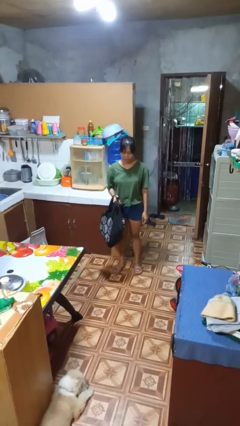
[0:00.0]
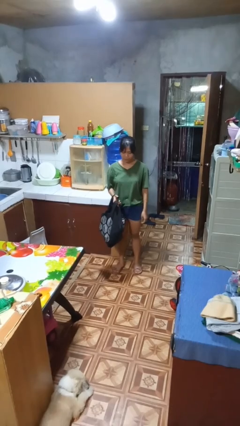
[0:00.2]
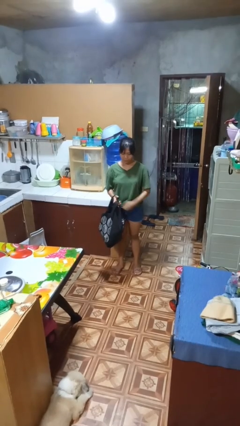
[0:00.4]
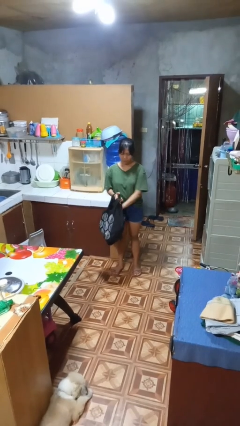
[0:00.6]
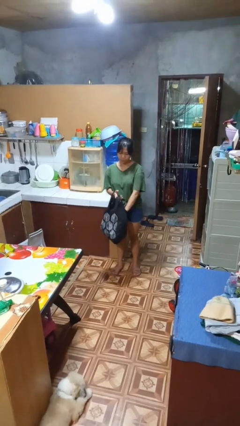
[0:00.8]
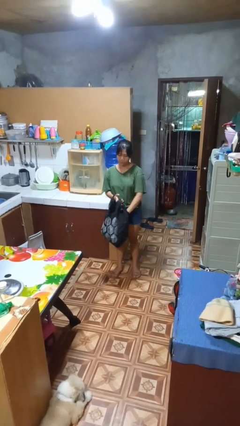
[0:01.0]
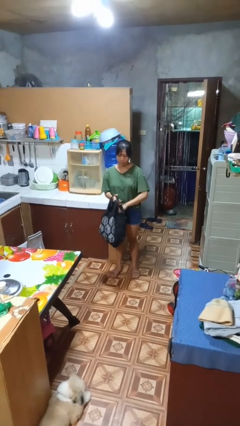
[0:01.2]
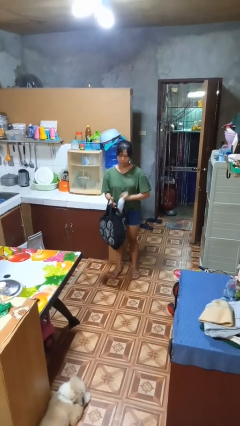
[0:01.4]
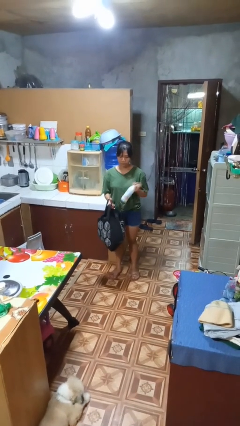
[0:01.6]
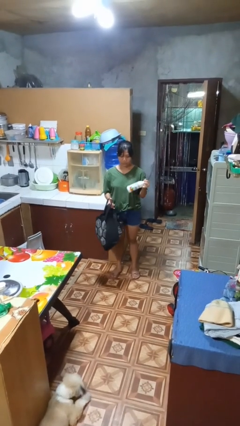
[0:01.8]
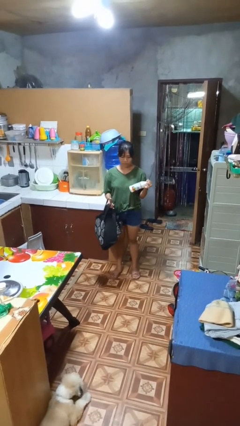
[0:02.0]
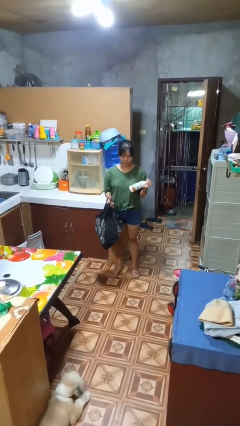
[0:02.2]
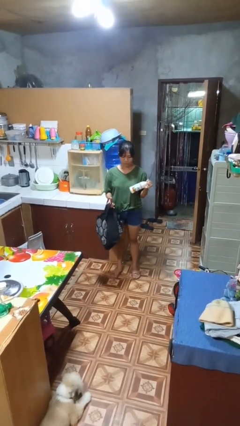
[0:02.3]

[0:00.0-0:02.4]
person takes object from bag

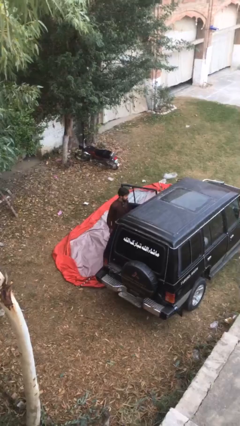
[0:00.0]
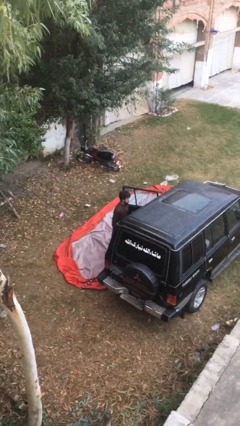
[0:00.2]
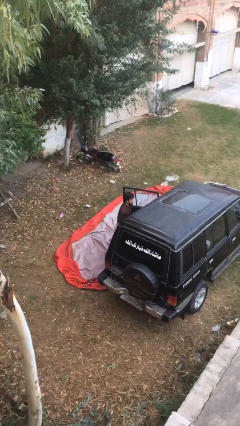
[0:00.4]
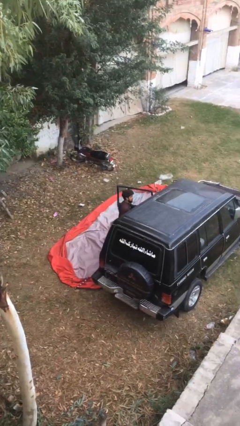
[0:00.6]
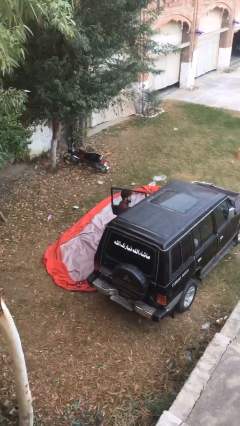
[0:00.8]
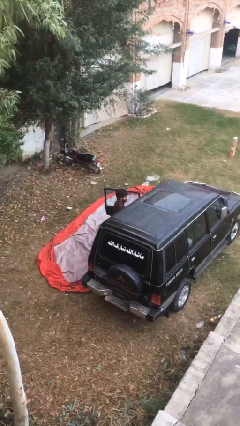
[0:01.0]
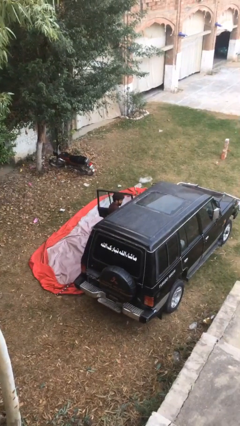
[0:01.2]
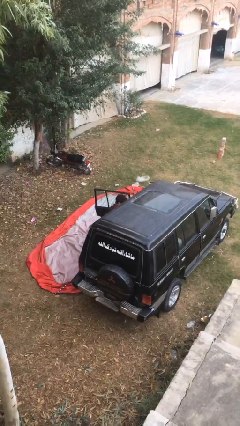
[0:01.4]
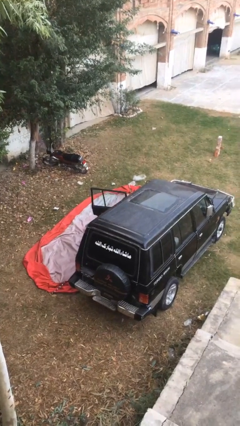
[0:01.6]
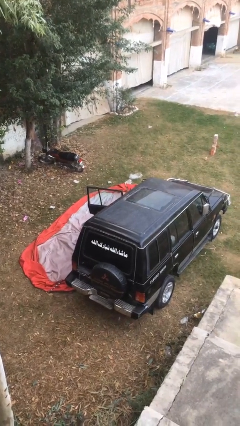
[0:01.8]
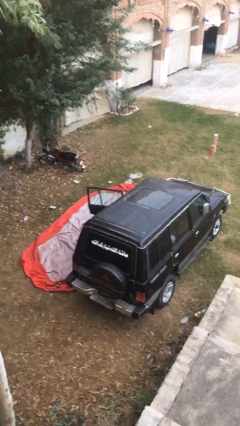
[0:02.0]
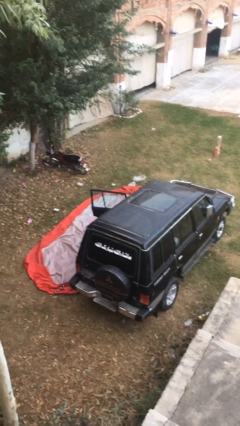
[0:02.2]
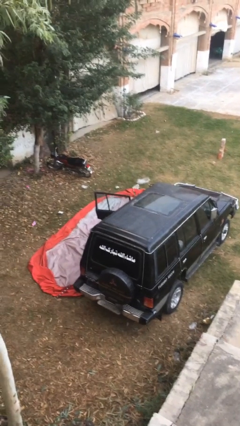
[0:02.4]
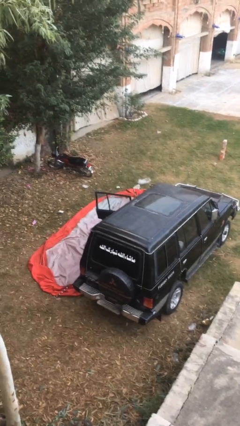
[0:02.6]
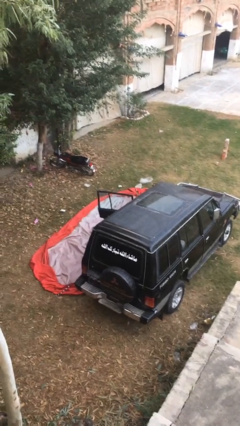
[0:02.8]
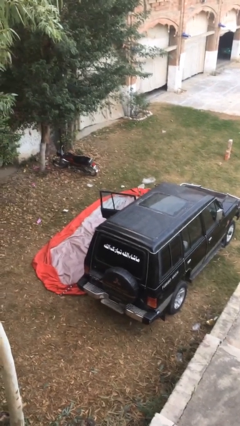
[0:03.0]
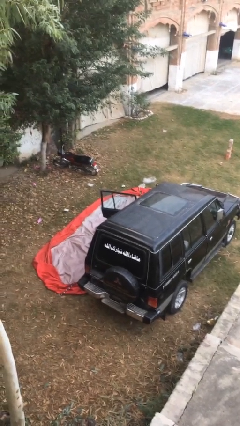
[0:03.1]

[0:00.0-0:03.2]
person enters car

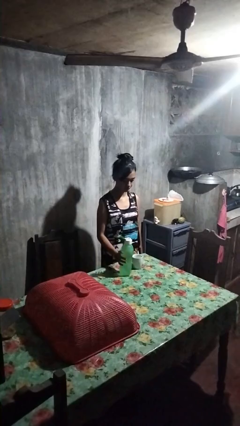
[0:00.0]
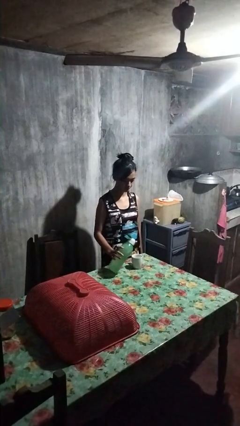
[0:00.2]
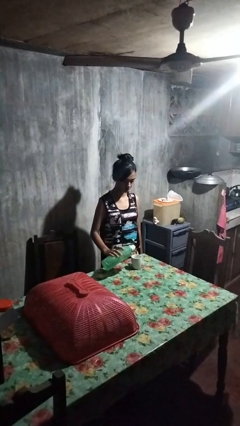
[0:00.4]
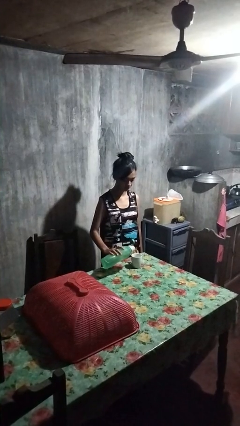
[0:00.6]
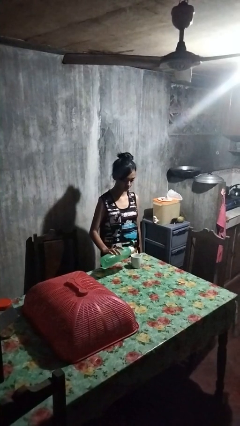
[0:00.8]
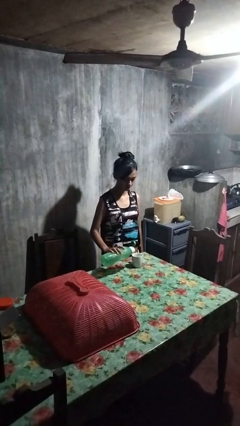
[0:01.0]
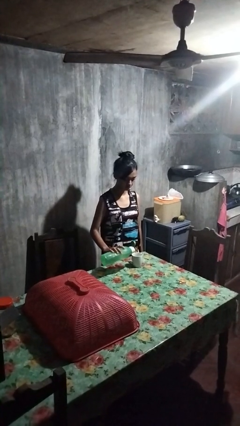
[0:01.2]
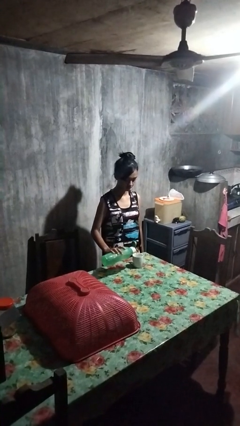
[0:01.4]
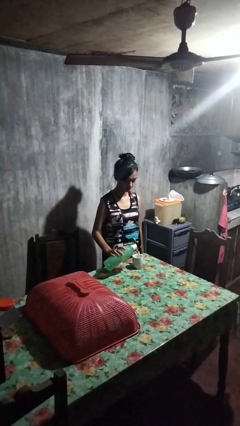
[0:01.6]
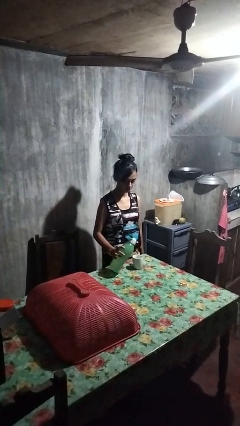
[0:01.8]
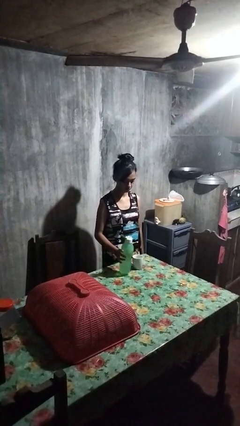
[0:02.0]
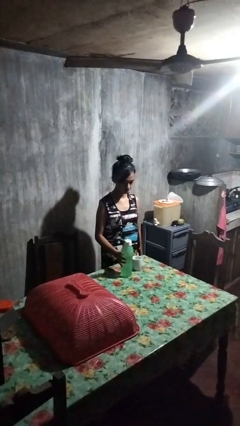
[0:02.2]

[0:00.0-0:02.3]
person pours liquid into cup

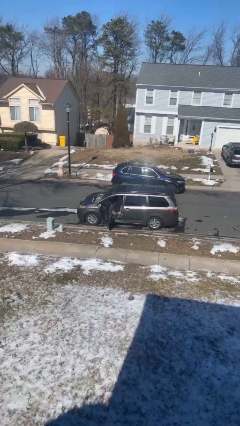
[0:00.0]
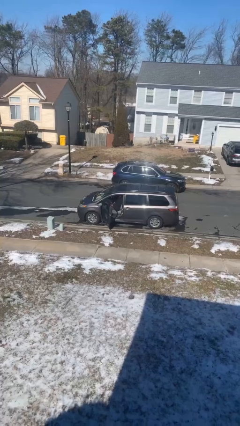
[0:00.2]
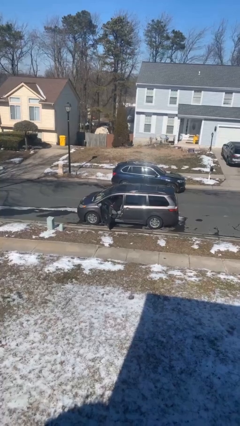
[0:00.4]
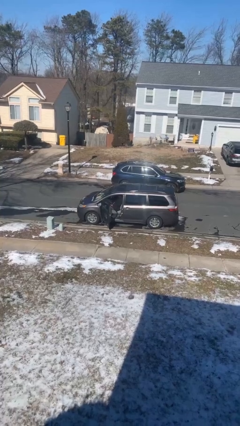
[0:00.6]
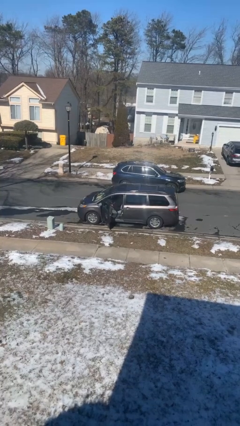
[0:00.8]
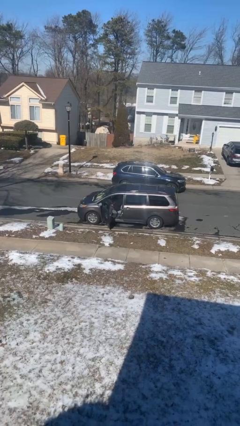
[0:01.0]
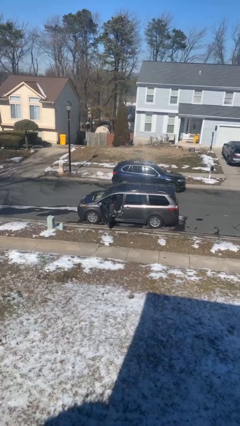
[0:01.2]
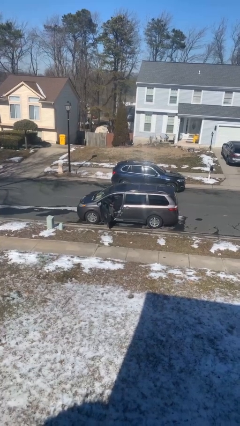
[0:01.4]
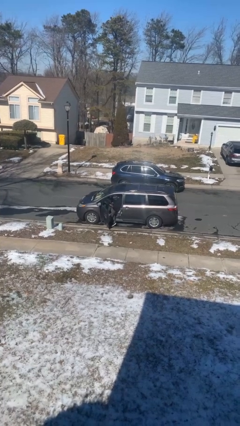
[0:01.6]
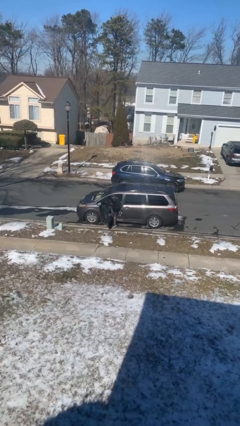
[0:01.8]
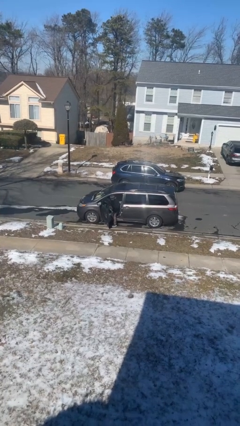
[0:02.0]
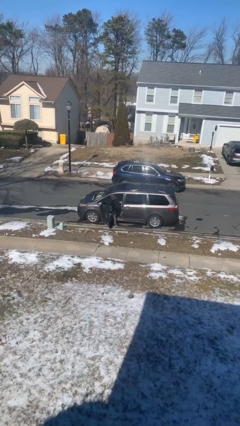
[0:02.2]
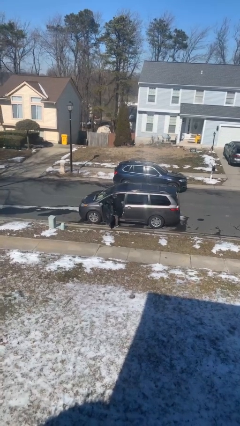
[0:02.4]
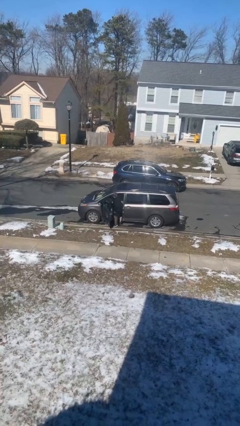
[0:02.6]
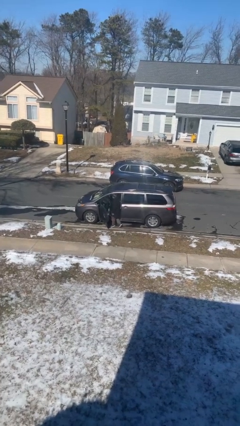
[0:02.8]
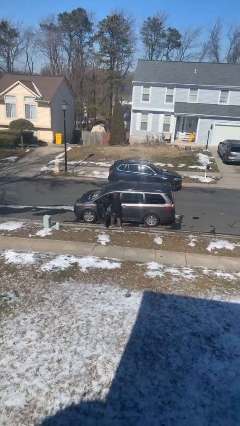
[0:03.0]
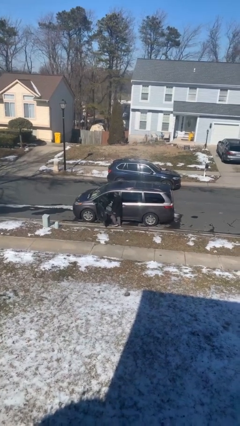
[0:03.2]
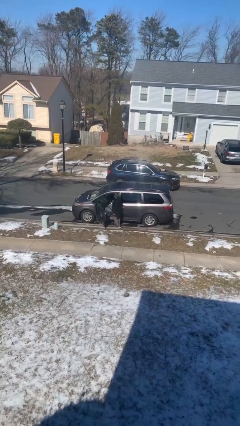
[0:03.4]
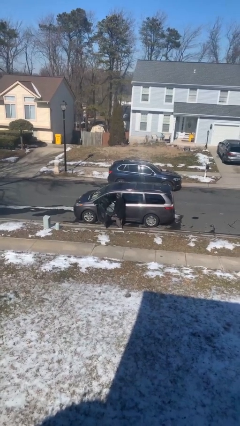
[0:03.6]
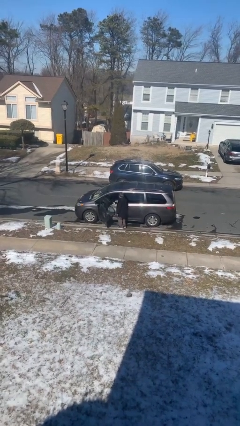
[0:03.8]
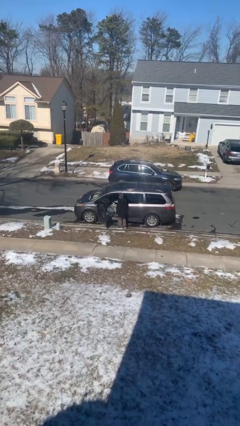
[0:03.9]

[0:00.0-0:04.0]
person exits car

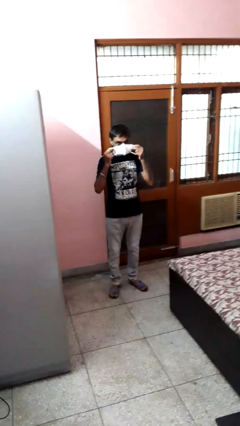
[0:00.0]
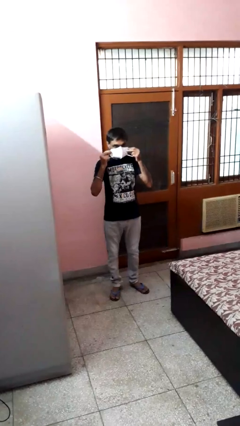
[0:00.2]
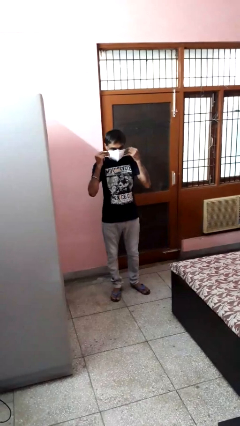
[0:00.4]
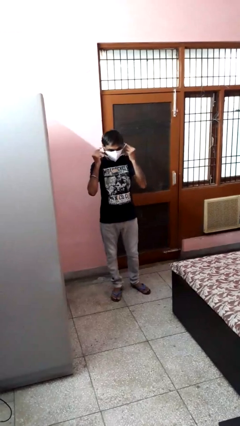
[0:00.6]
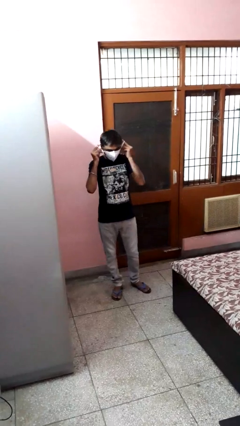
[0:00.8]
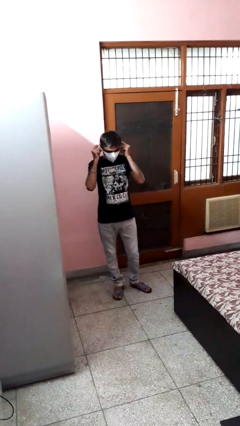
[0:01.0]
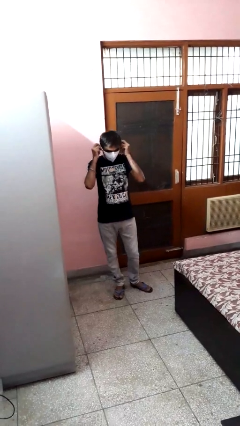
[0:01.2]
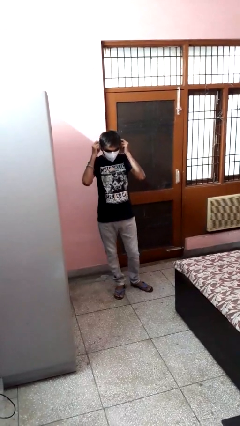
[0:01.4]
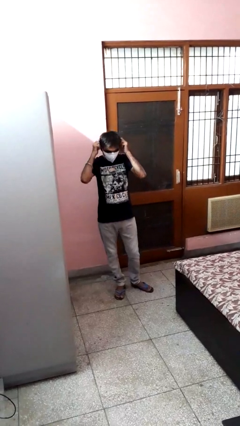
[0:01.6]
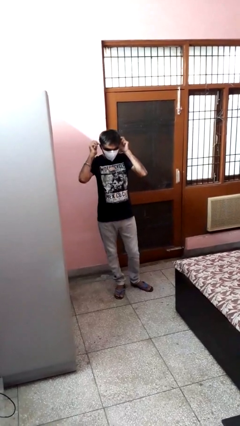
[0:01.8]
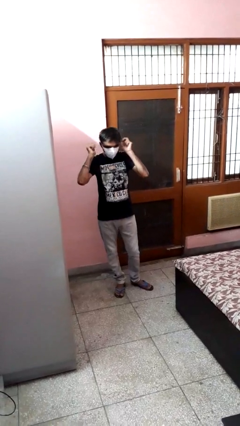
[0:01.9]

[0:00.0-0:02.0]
person puts on facemask

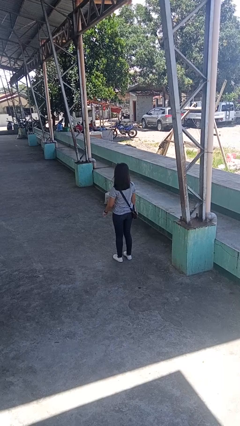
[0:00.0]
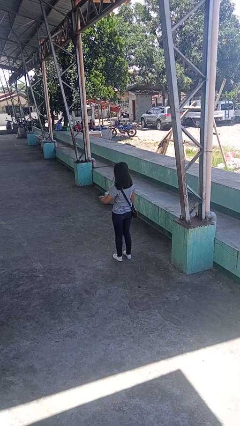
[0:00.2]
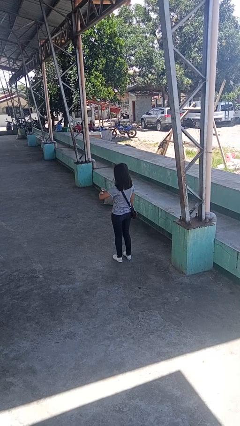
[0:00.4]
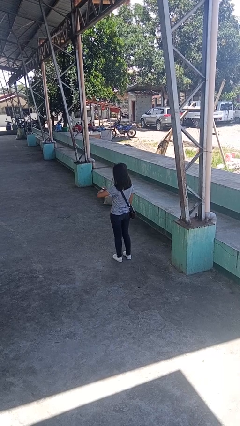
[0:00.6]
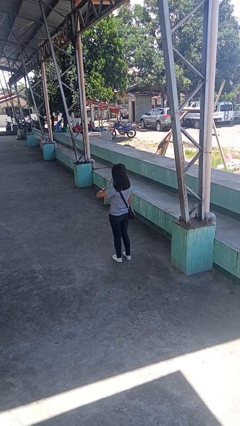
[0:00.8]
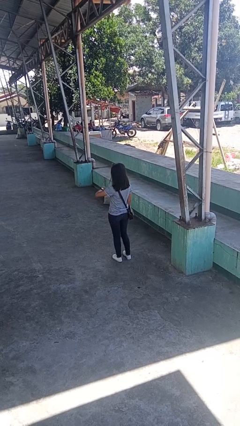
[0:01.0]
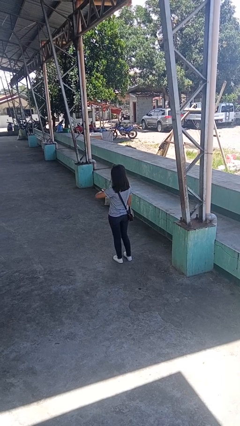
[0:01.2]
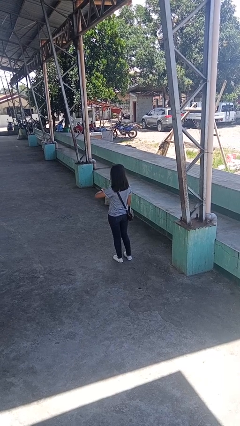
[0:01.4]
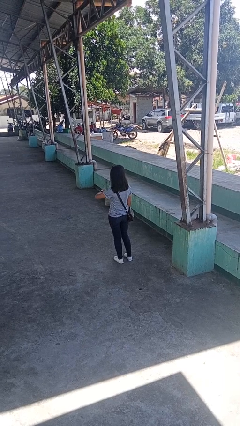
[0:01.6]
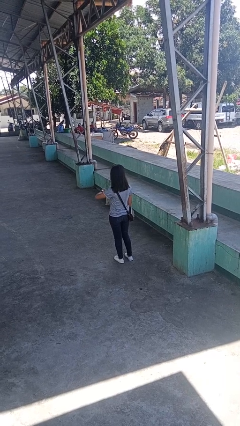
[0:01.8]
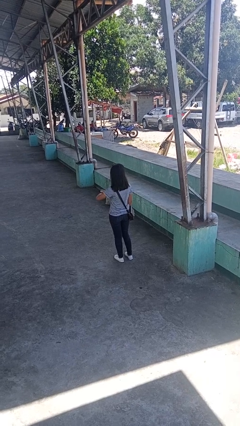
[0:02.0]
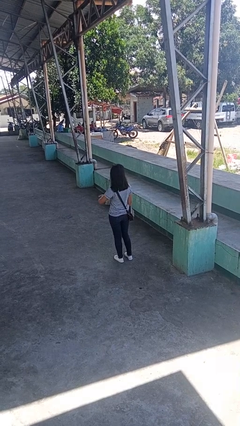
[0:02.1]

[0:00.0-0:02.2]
person looks at wristwatch

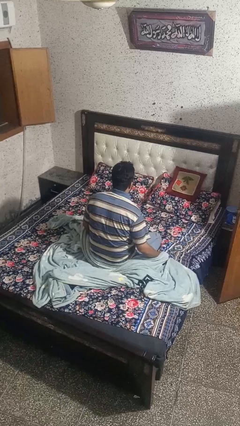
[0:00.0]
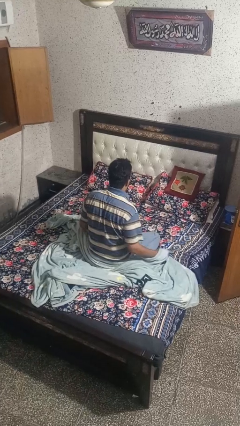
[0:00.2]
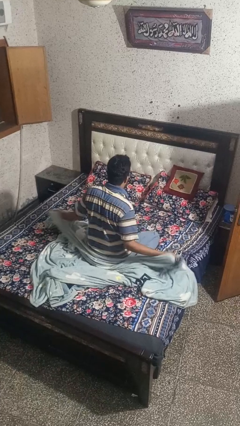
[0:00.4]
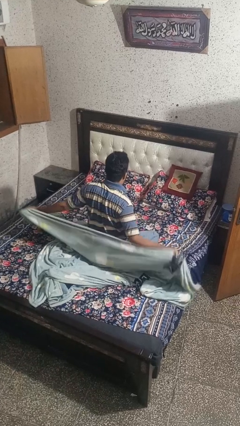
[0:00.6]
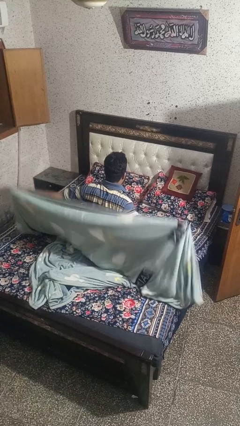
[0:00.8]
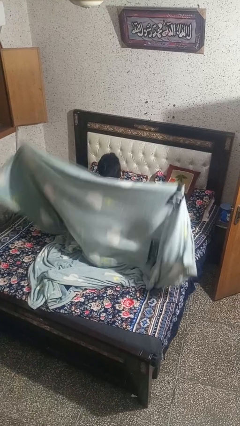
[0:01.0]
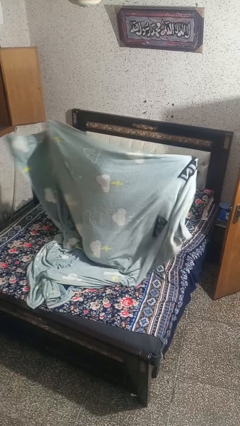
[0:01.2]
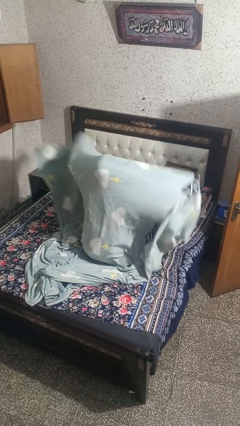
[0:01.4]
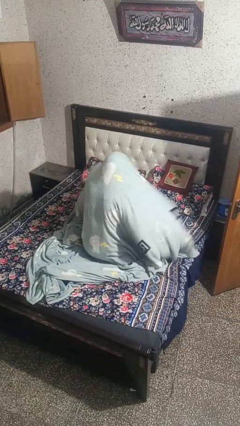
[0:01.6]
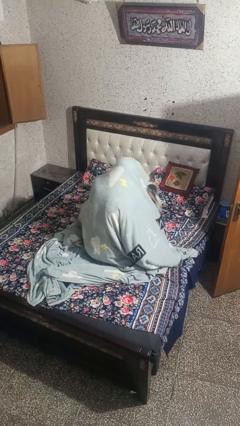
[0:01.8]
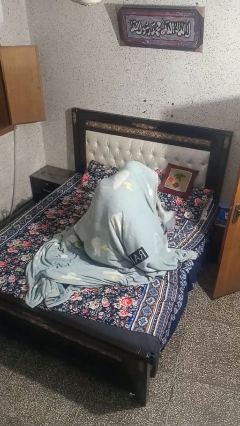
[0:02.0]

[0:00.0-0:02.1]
person covers with blanket
